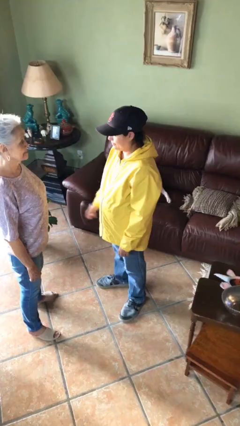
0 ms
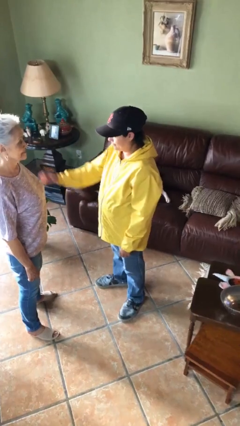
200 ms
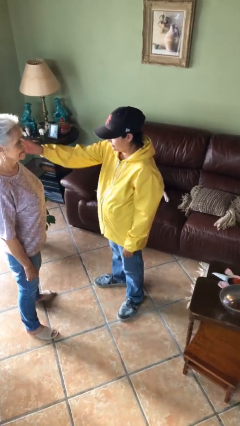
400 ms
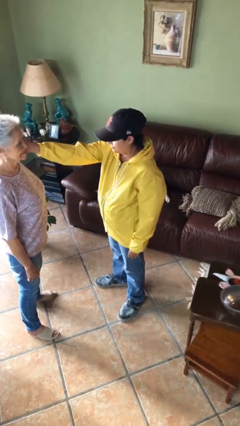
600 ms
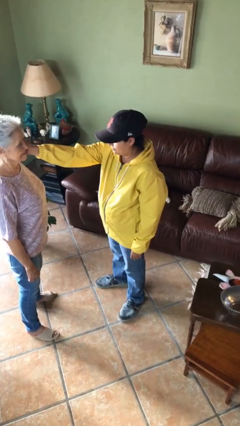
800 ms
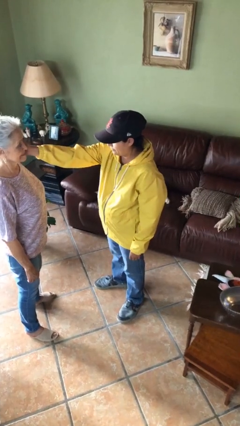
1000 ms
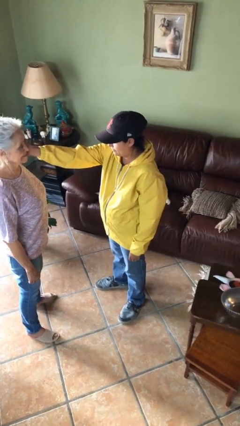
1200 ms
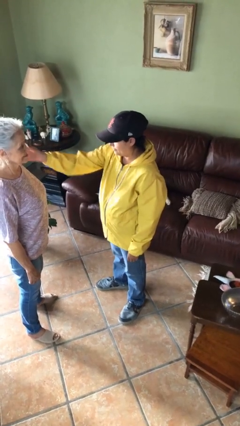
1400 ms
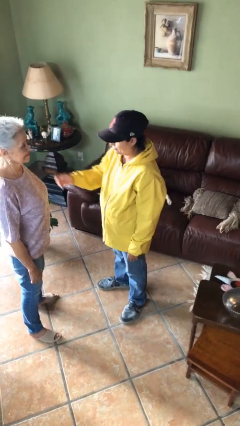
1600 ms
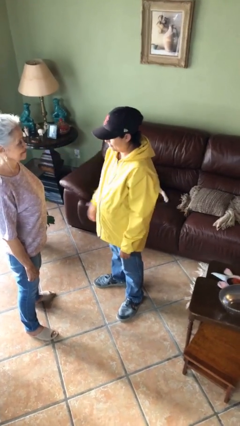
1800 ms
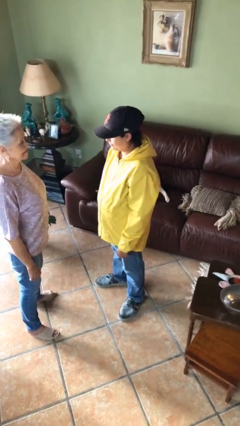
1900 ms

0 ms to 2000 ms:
person touches face of person

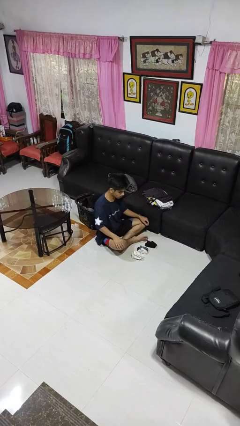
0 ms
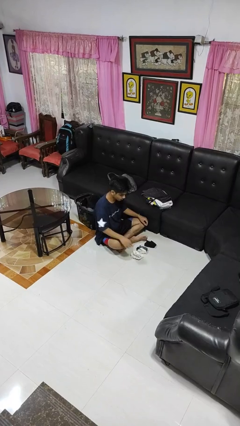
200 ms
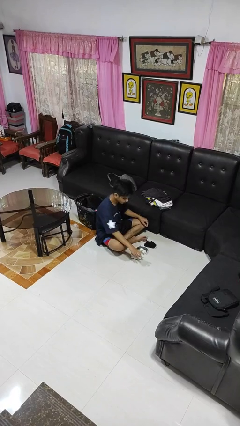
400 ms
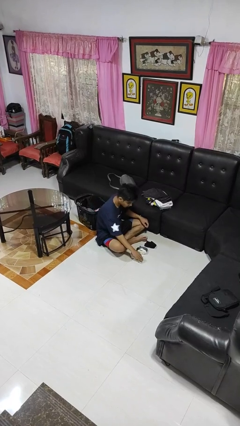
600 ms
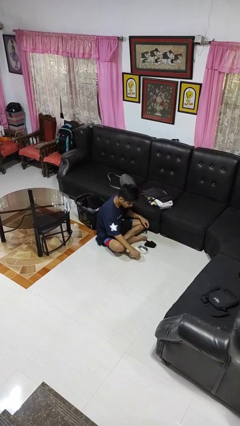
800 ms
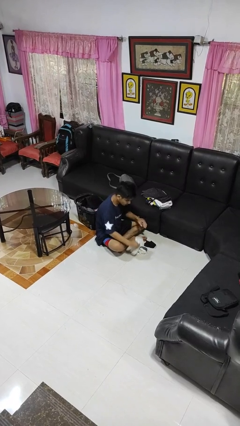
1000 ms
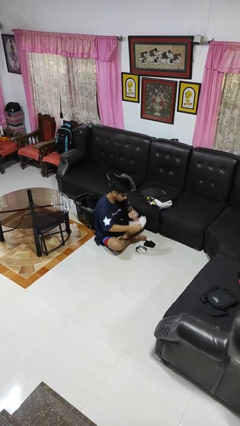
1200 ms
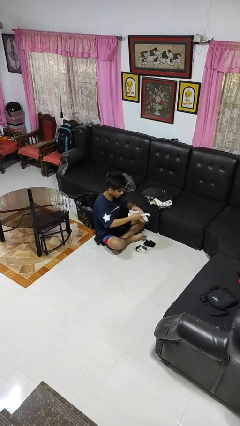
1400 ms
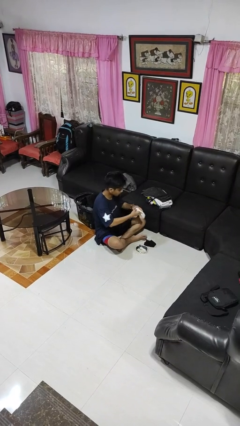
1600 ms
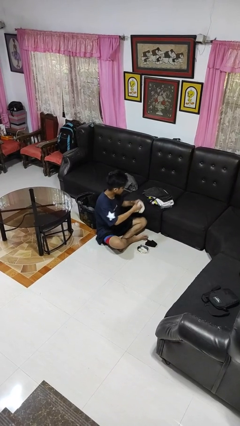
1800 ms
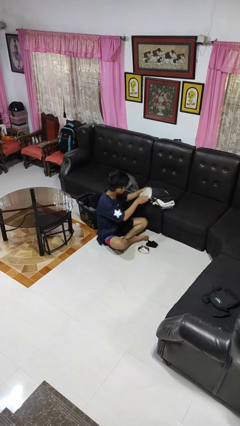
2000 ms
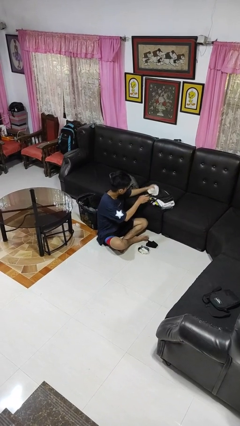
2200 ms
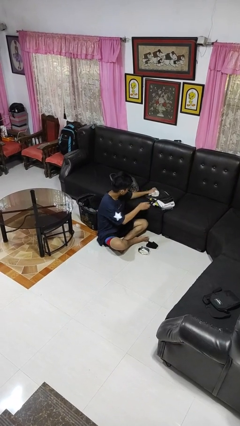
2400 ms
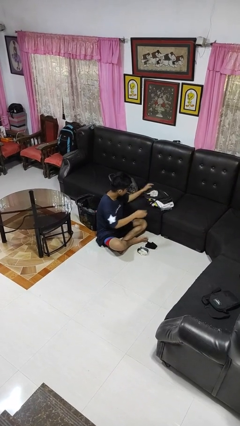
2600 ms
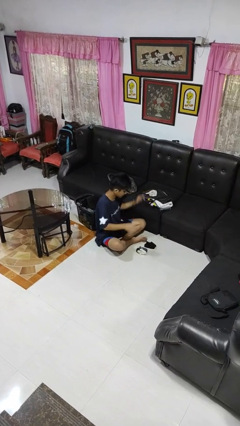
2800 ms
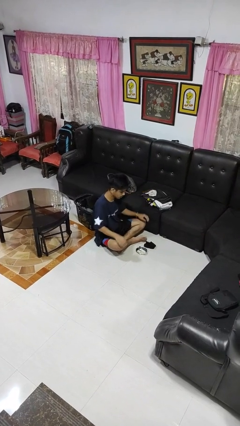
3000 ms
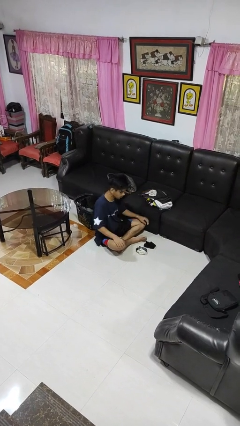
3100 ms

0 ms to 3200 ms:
person folds socks

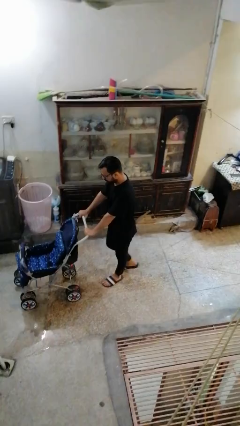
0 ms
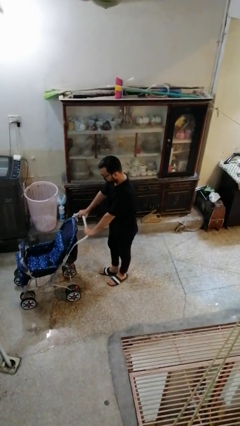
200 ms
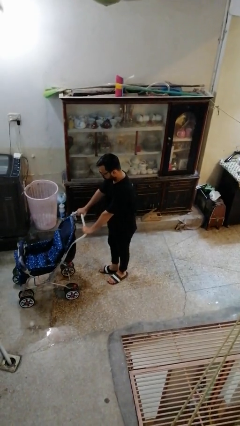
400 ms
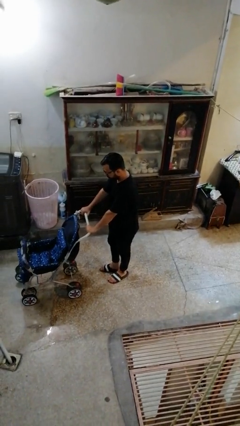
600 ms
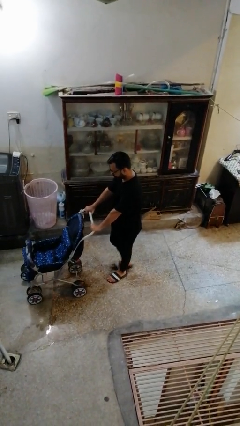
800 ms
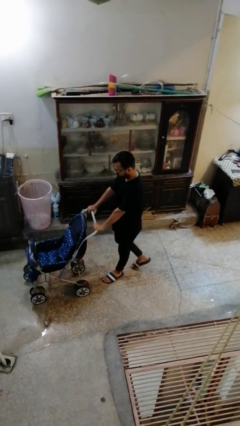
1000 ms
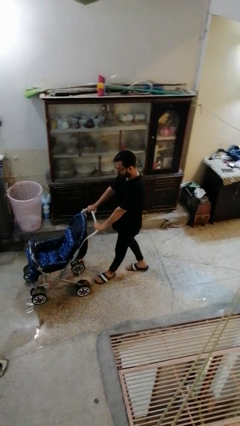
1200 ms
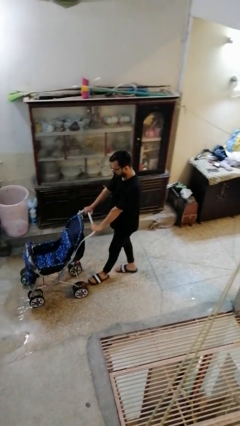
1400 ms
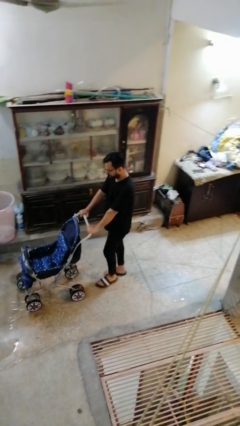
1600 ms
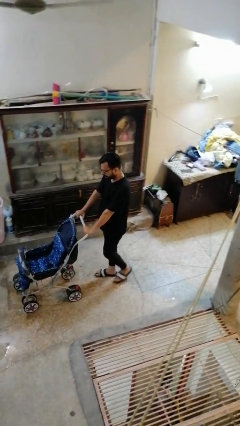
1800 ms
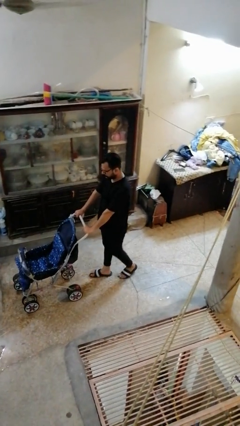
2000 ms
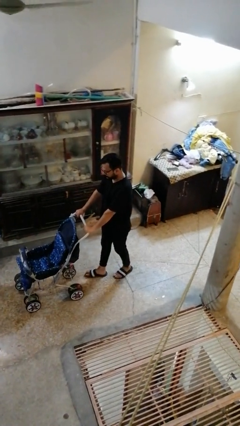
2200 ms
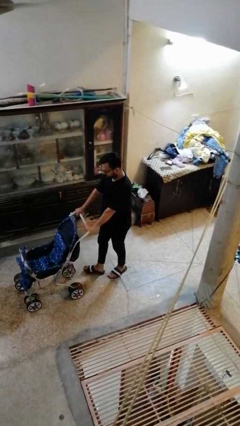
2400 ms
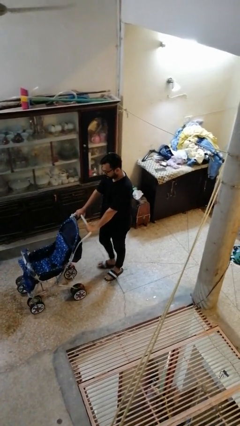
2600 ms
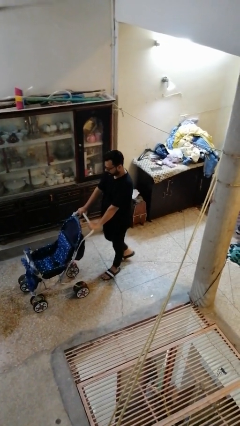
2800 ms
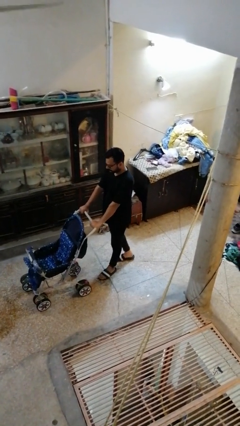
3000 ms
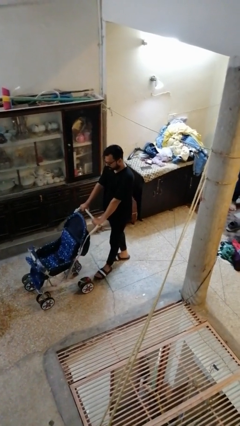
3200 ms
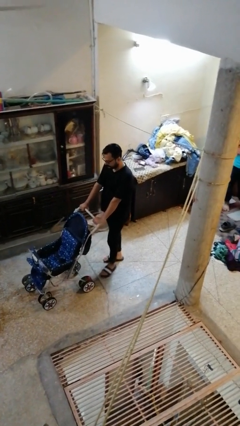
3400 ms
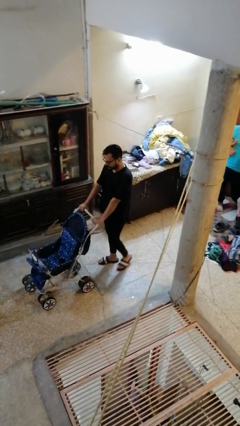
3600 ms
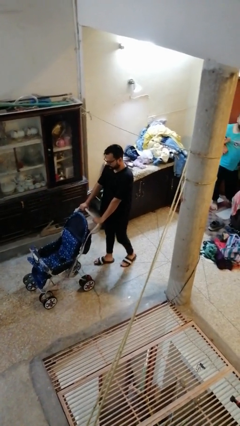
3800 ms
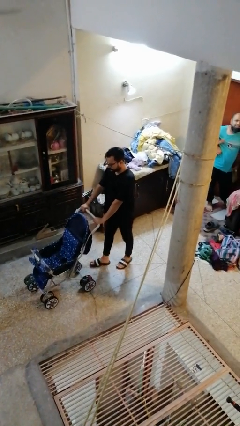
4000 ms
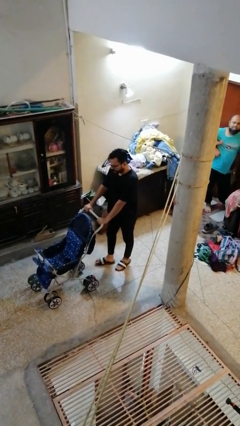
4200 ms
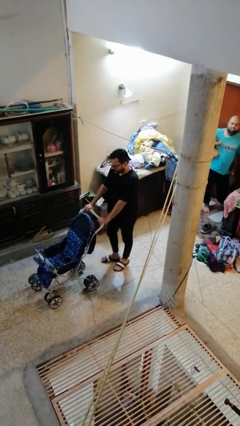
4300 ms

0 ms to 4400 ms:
person pulls wheeled cart

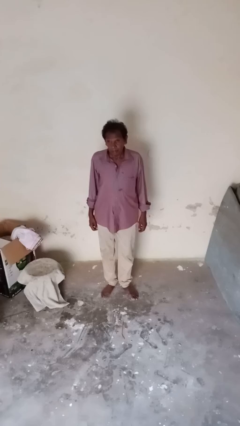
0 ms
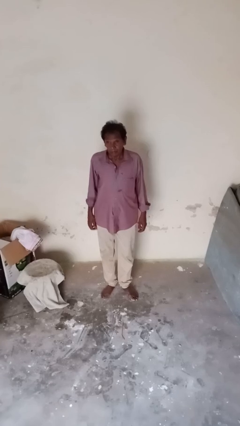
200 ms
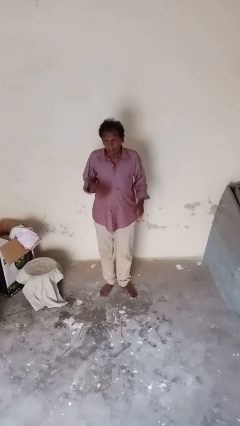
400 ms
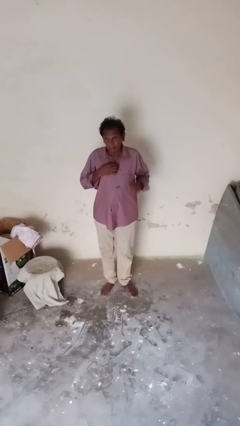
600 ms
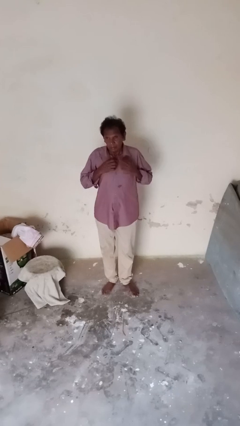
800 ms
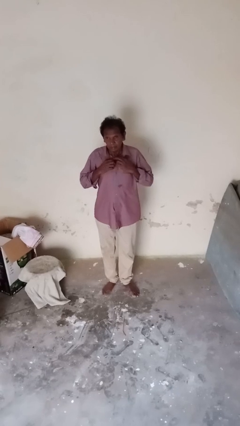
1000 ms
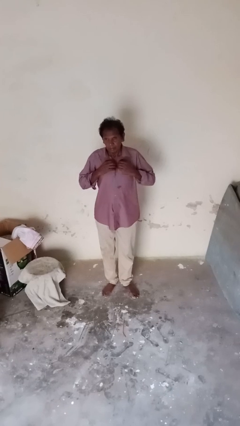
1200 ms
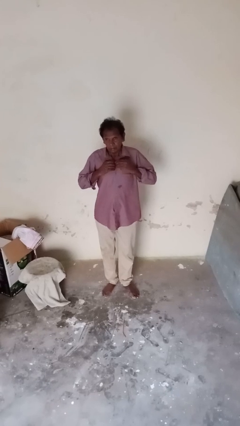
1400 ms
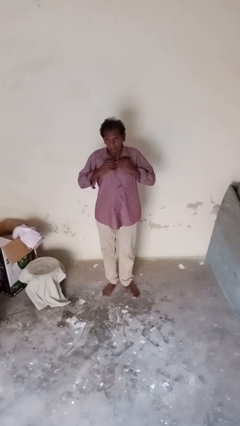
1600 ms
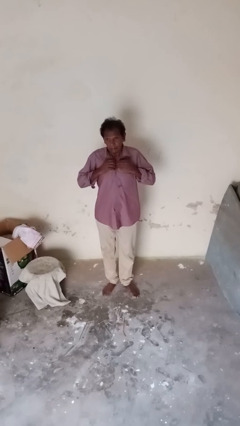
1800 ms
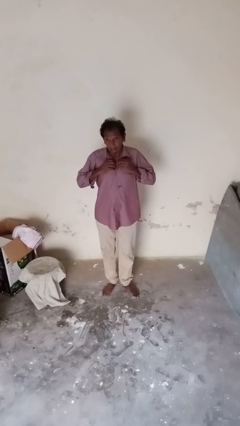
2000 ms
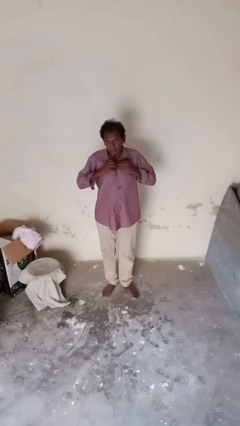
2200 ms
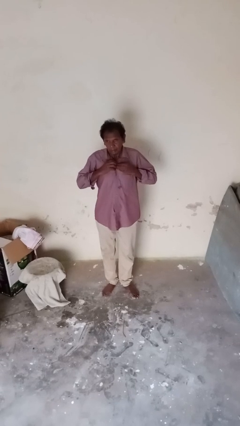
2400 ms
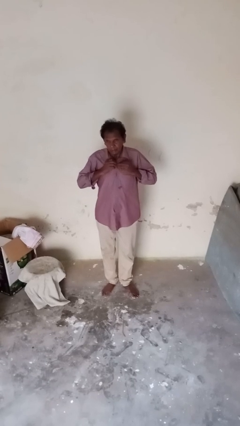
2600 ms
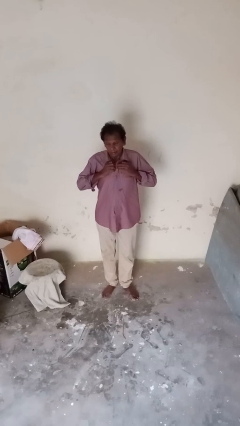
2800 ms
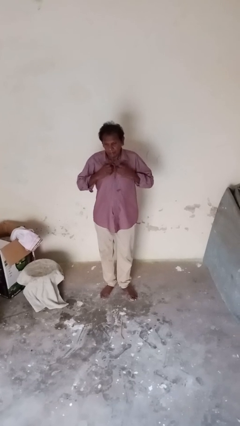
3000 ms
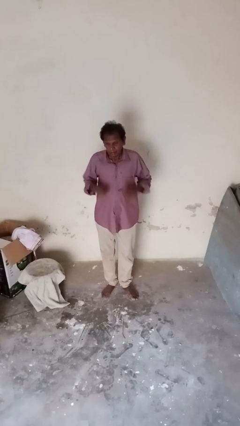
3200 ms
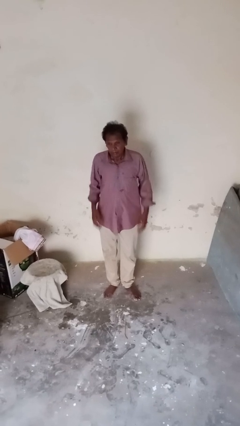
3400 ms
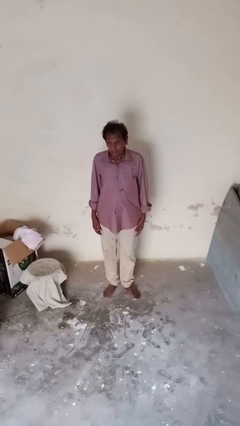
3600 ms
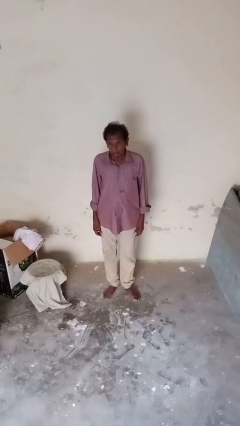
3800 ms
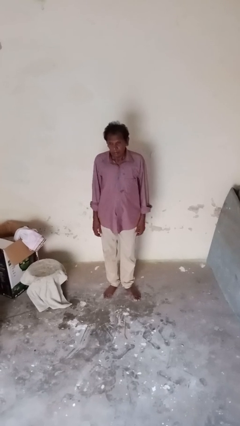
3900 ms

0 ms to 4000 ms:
person buttons shirt

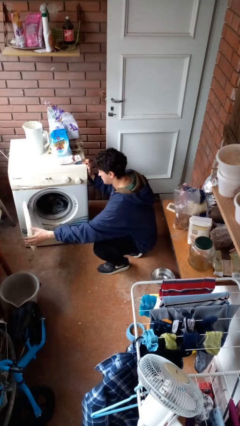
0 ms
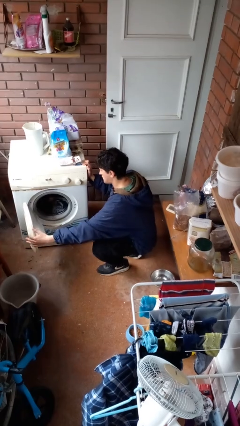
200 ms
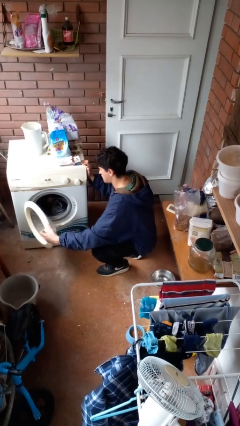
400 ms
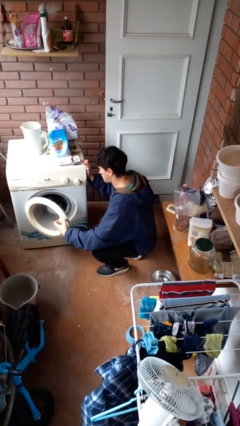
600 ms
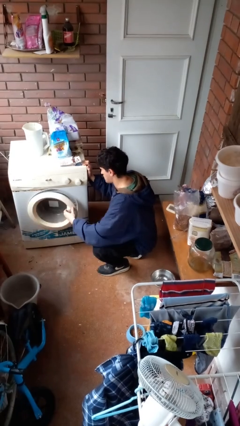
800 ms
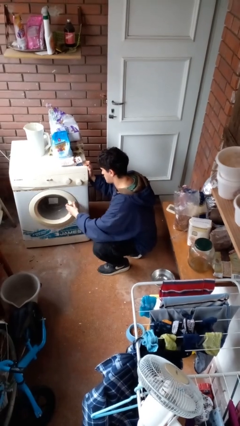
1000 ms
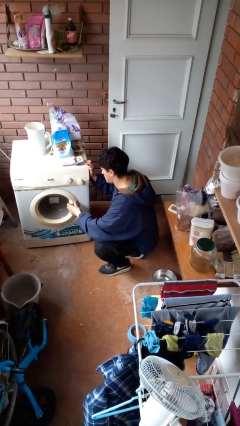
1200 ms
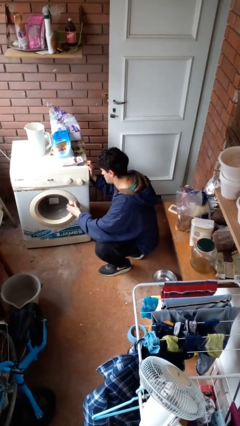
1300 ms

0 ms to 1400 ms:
person closes clothes washer

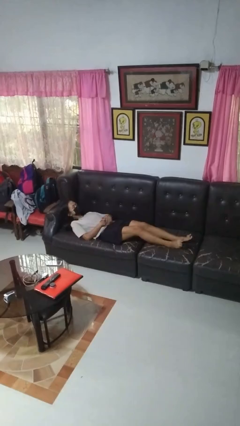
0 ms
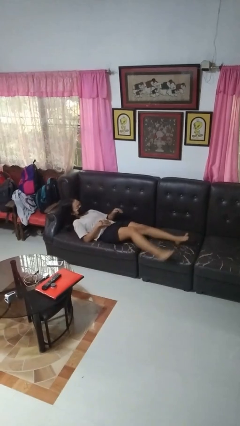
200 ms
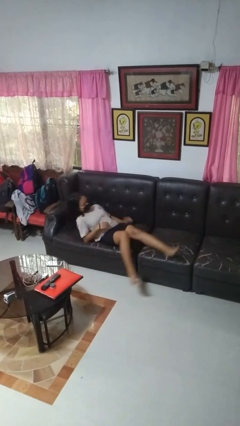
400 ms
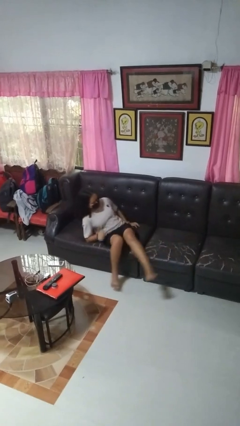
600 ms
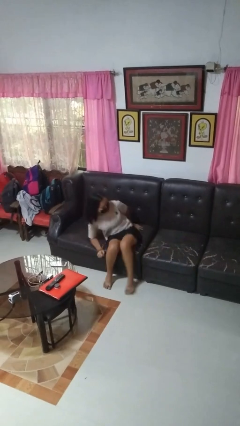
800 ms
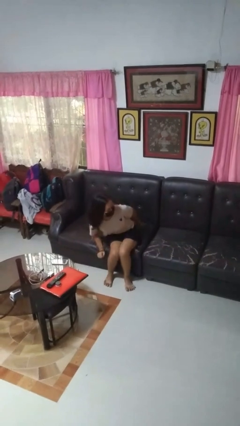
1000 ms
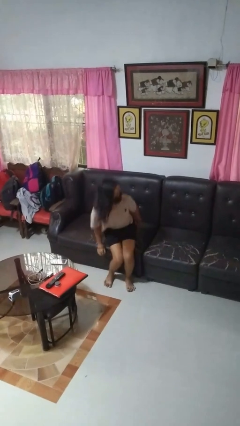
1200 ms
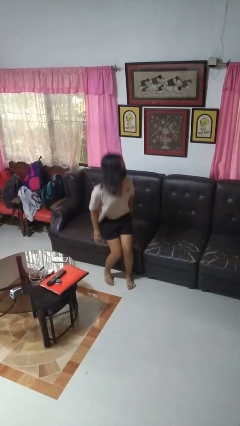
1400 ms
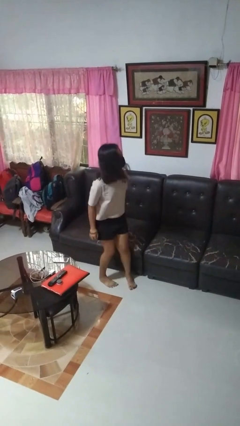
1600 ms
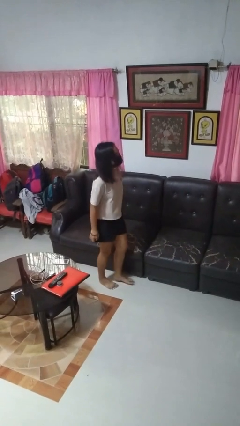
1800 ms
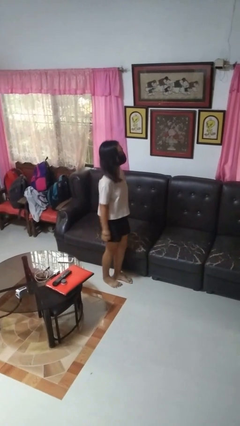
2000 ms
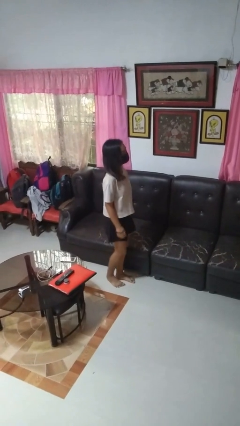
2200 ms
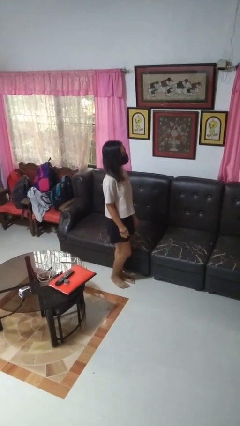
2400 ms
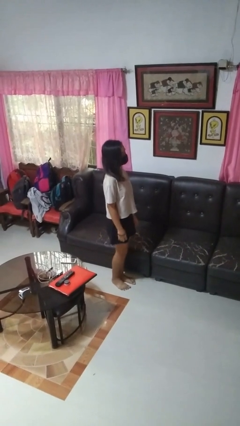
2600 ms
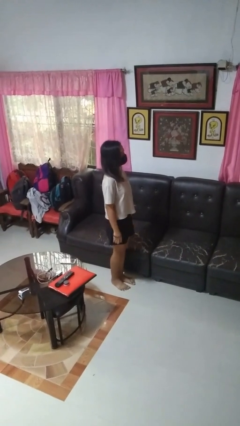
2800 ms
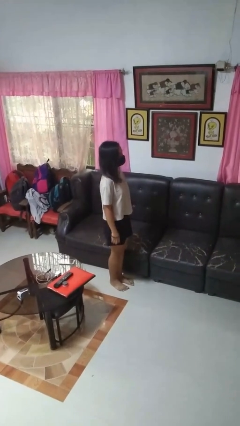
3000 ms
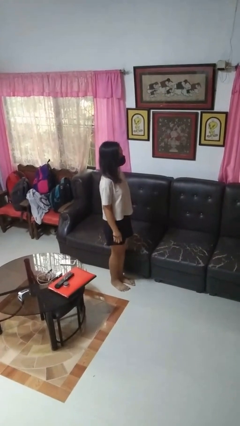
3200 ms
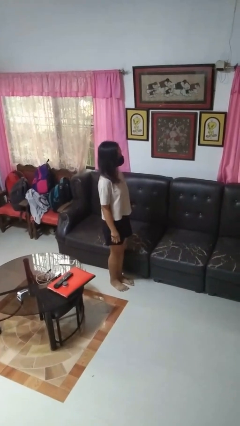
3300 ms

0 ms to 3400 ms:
person stands up
